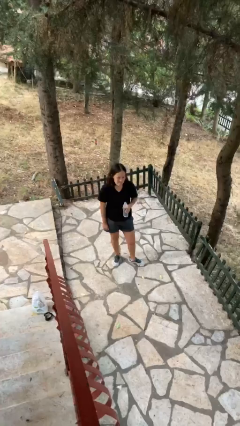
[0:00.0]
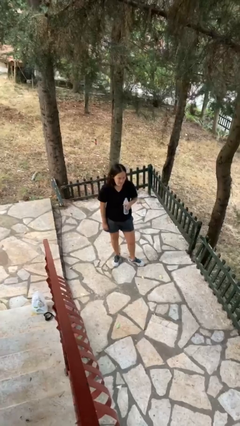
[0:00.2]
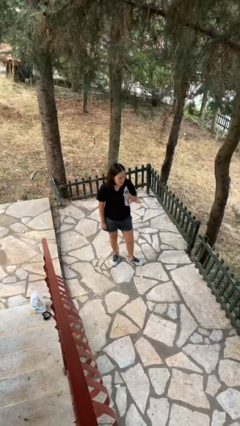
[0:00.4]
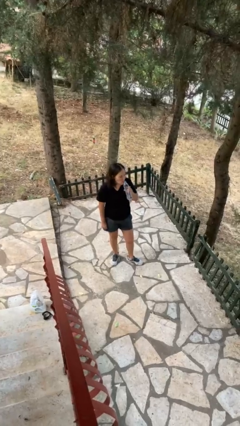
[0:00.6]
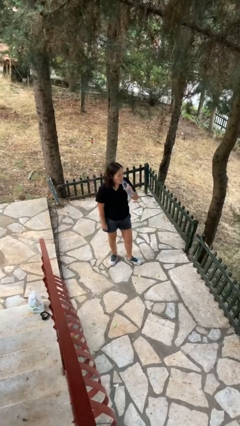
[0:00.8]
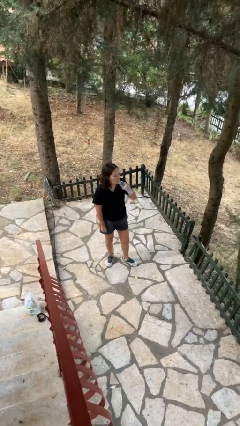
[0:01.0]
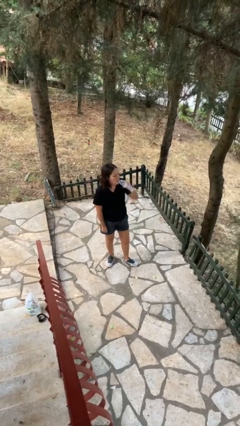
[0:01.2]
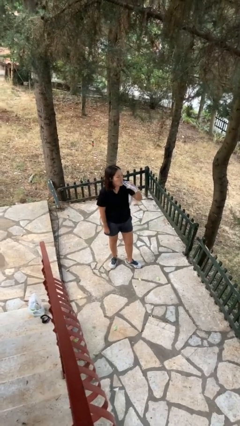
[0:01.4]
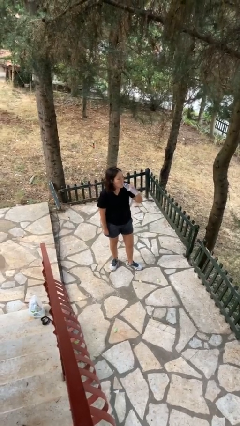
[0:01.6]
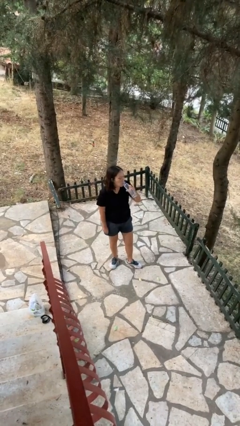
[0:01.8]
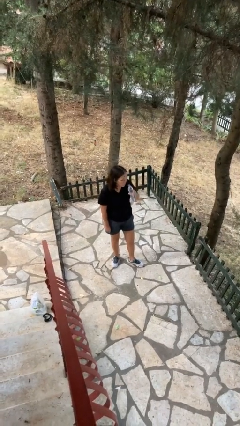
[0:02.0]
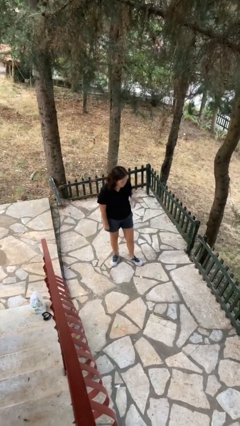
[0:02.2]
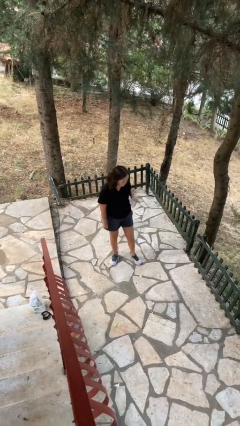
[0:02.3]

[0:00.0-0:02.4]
person drinks from bottle

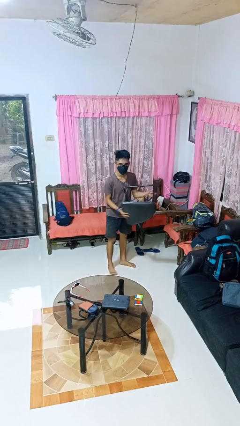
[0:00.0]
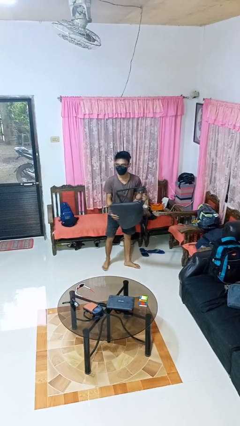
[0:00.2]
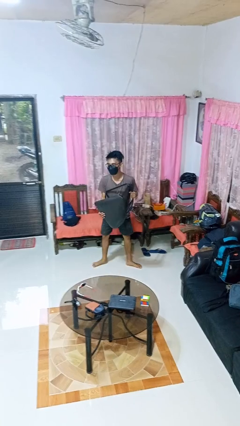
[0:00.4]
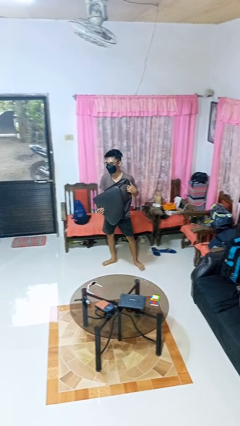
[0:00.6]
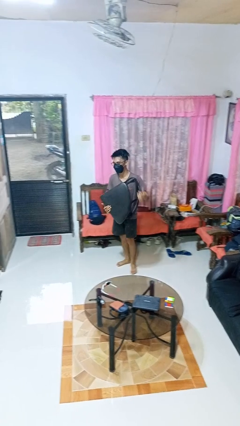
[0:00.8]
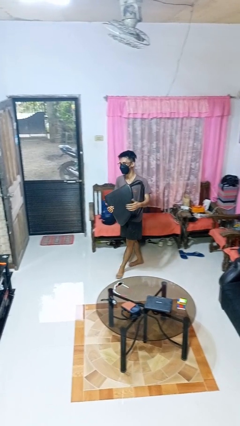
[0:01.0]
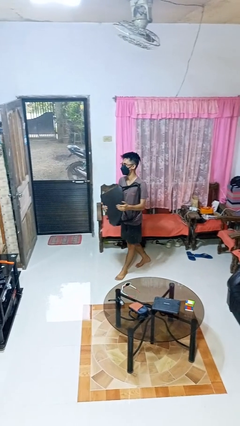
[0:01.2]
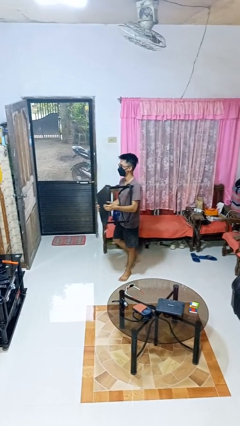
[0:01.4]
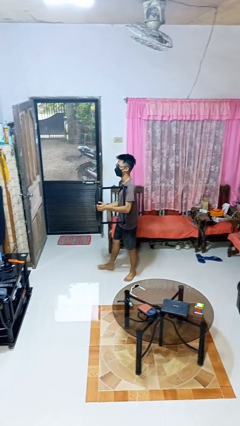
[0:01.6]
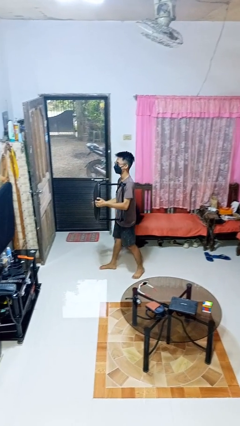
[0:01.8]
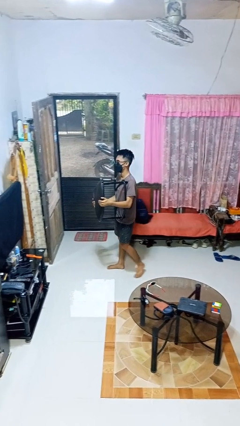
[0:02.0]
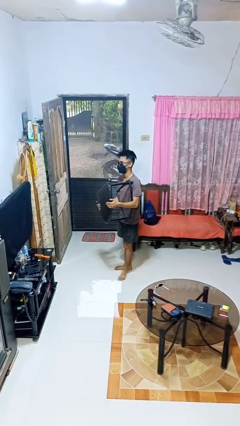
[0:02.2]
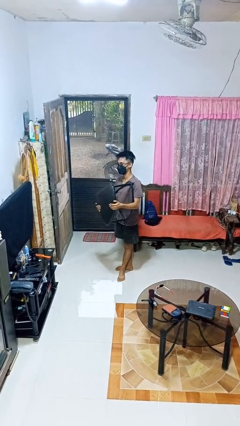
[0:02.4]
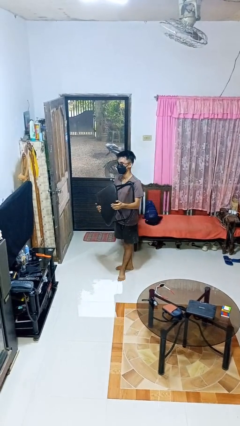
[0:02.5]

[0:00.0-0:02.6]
person carries furniture

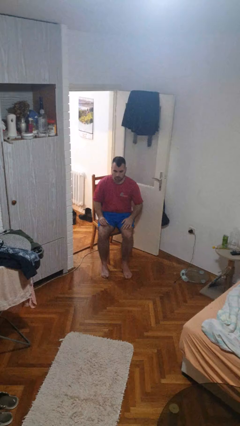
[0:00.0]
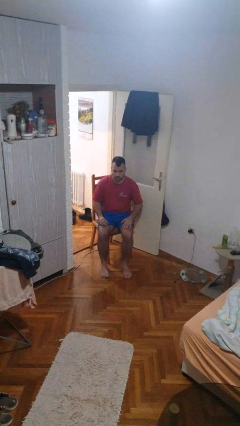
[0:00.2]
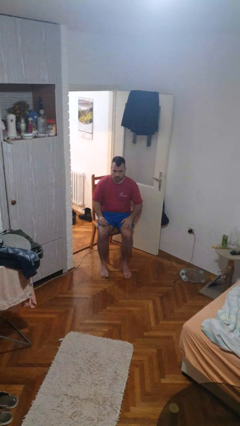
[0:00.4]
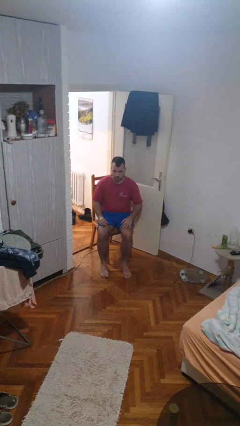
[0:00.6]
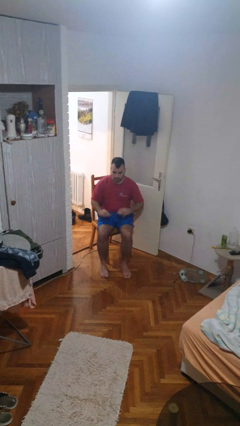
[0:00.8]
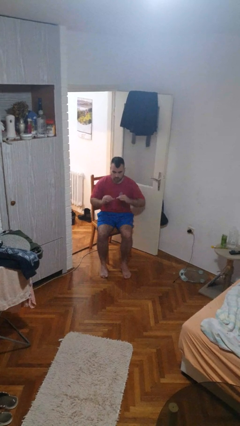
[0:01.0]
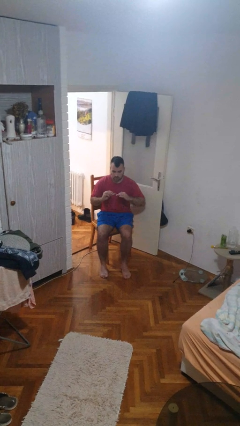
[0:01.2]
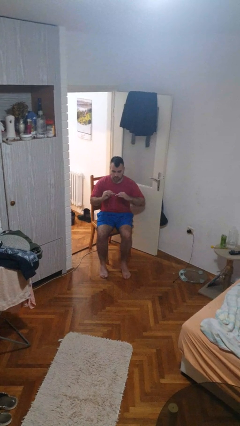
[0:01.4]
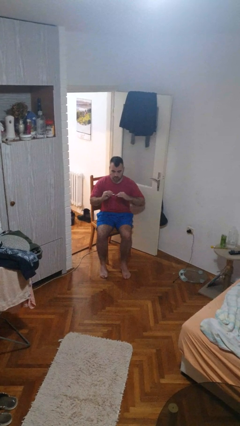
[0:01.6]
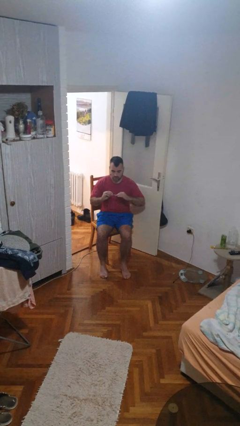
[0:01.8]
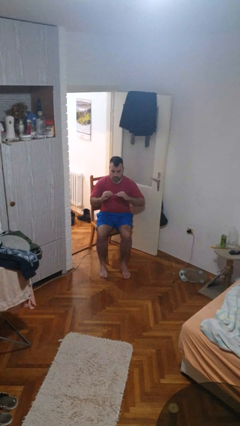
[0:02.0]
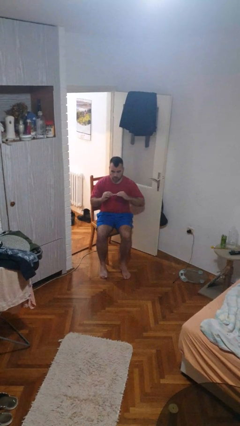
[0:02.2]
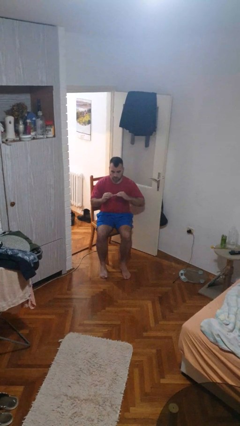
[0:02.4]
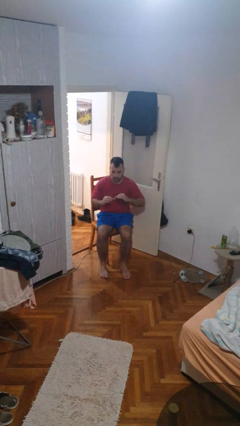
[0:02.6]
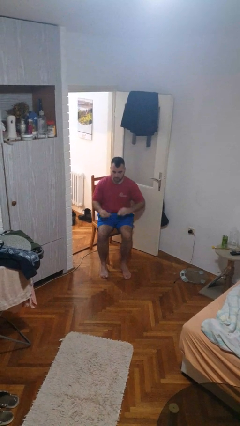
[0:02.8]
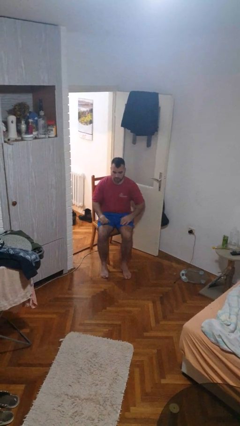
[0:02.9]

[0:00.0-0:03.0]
person clips fingernails

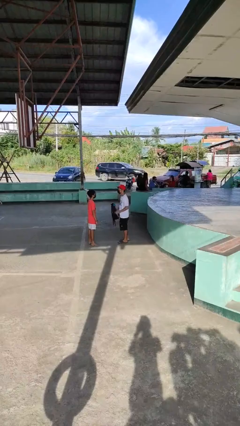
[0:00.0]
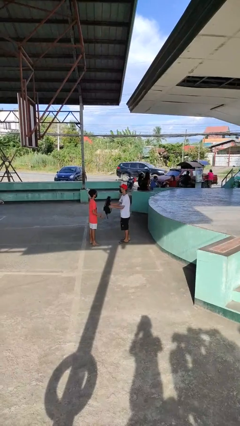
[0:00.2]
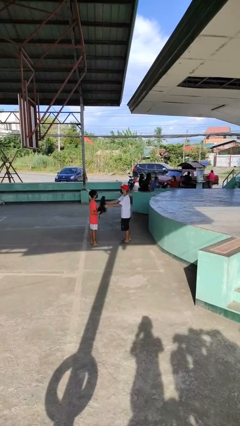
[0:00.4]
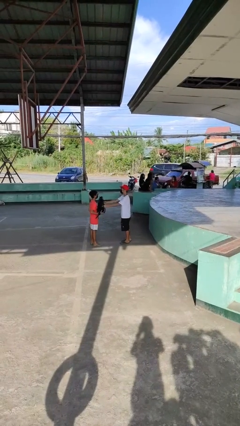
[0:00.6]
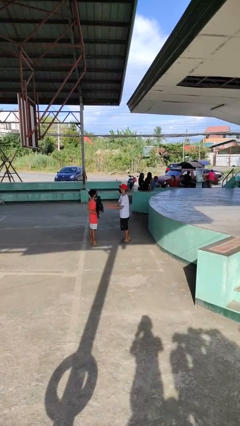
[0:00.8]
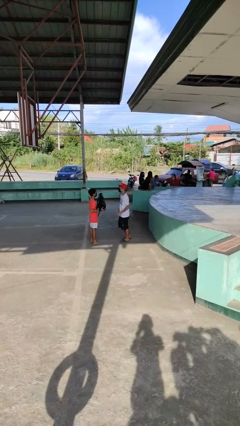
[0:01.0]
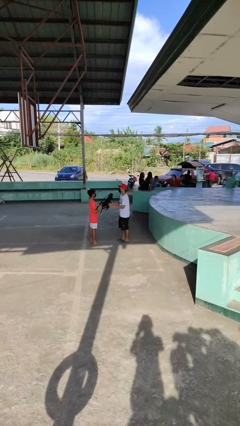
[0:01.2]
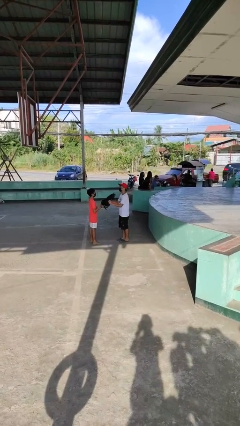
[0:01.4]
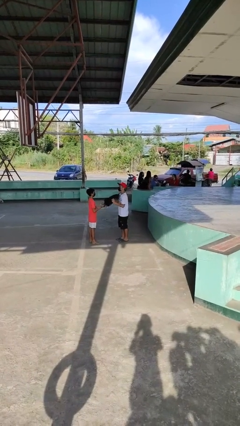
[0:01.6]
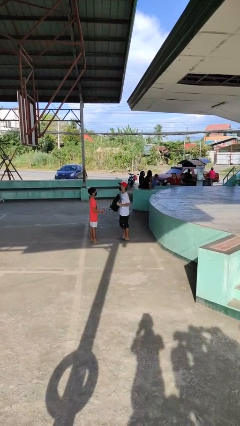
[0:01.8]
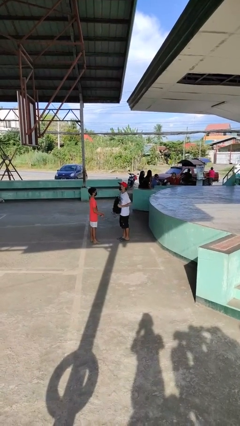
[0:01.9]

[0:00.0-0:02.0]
person transfers object to person

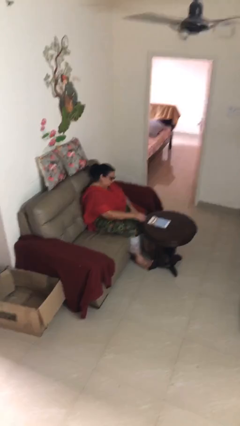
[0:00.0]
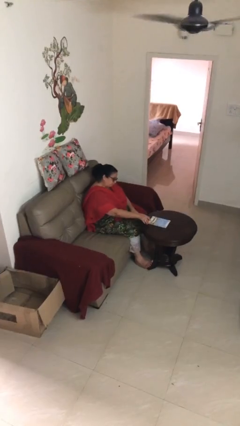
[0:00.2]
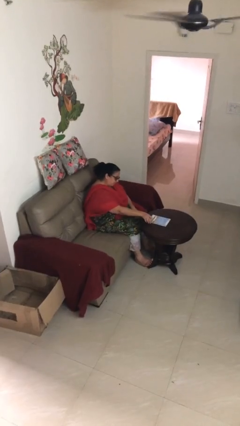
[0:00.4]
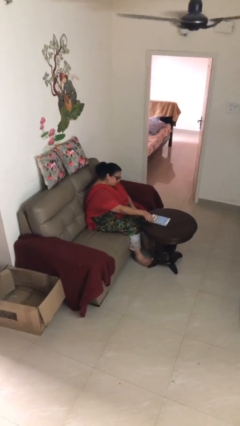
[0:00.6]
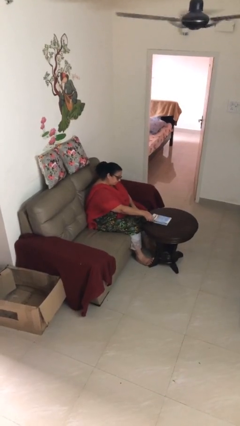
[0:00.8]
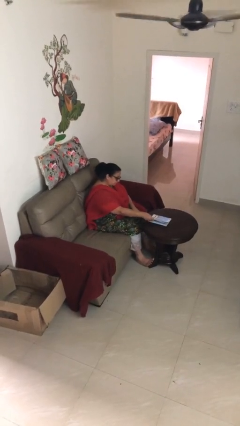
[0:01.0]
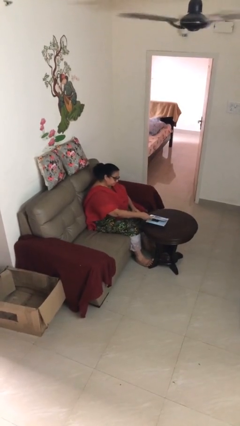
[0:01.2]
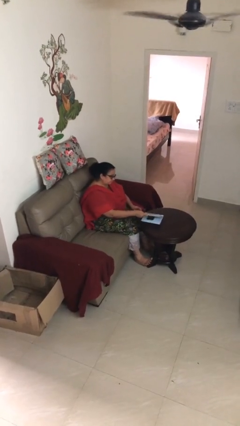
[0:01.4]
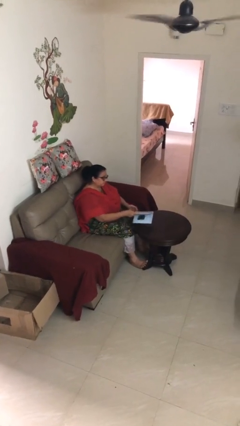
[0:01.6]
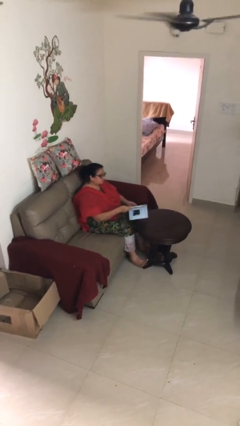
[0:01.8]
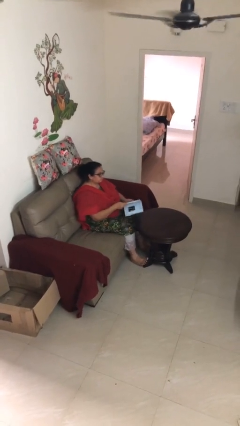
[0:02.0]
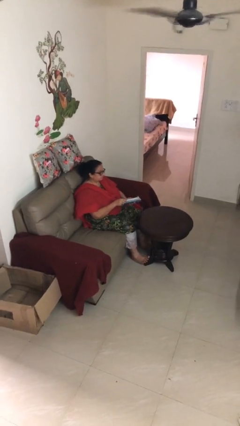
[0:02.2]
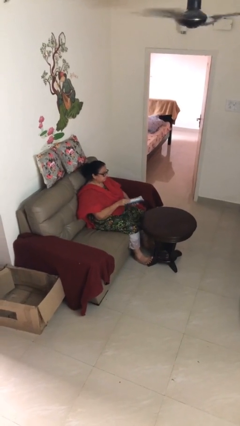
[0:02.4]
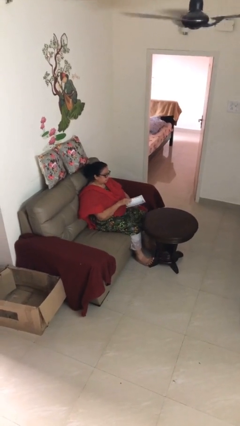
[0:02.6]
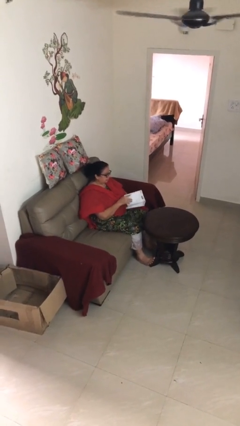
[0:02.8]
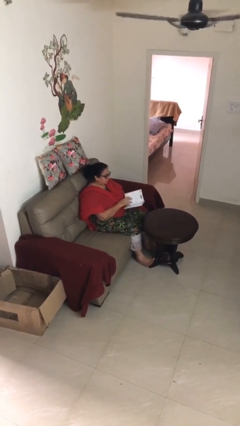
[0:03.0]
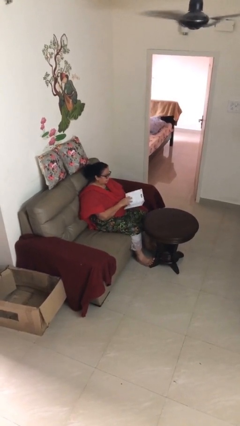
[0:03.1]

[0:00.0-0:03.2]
person picks up object from table

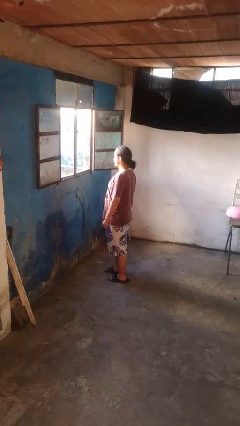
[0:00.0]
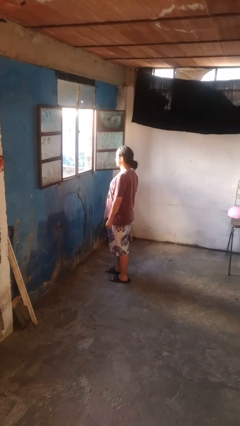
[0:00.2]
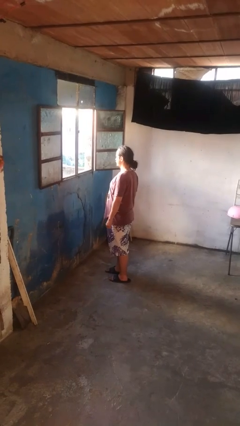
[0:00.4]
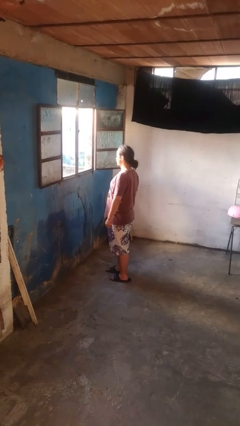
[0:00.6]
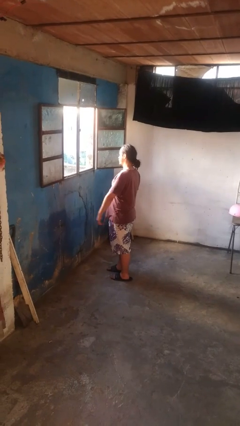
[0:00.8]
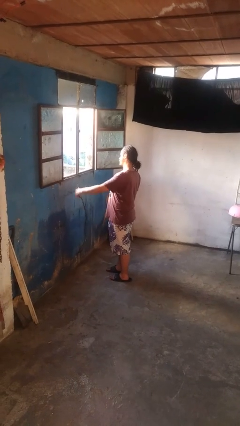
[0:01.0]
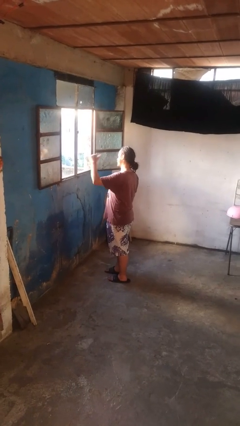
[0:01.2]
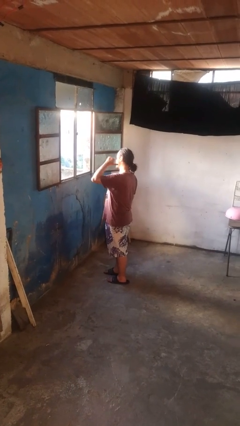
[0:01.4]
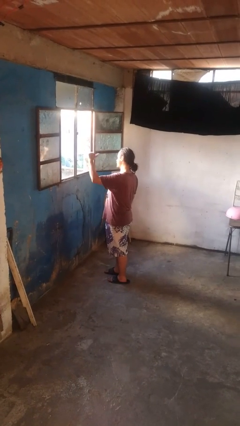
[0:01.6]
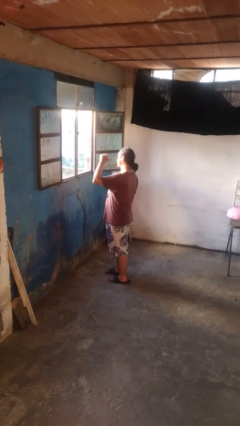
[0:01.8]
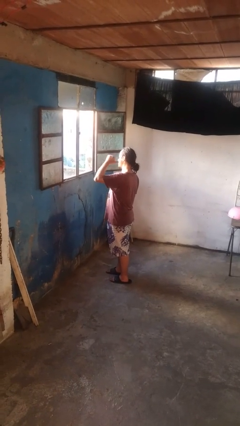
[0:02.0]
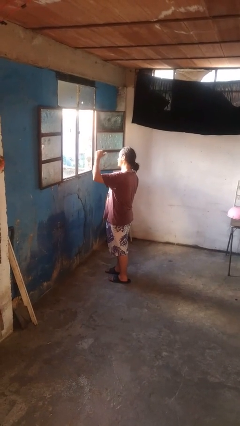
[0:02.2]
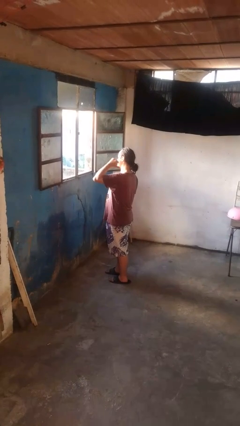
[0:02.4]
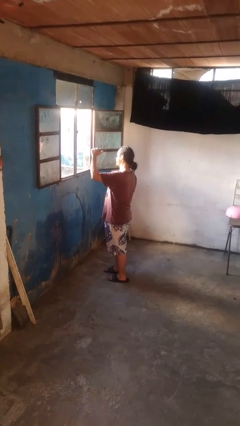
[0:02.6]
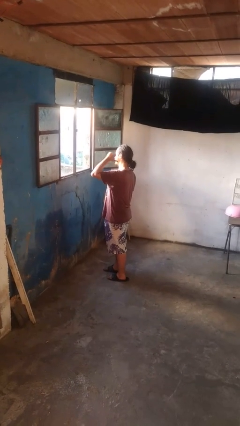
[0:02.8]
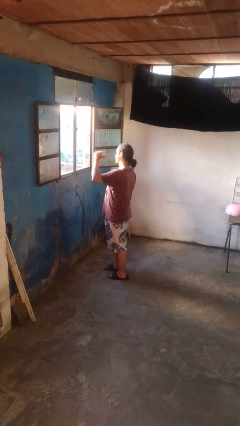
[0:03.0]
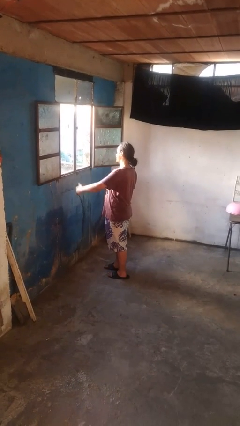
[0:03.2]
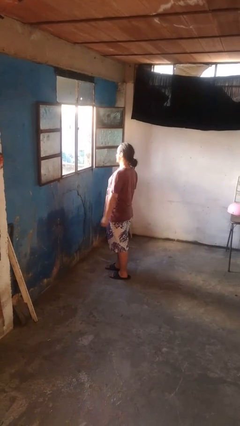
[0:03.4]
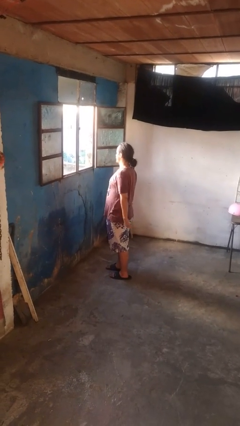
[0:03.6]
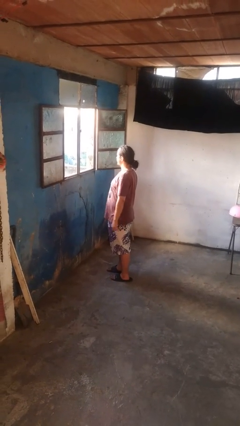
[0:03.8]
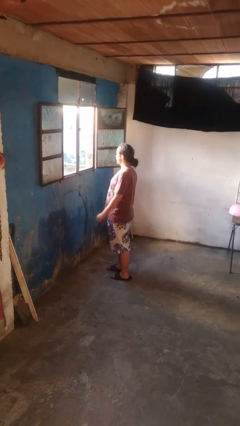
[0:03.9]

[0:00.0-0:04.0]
person gestures behind me
